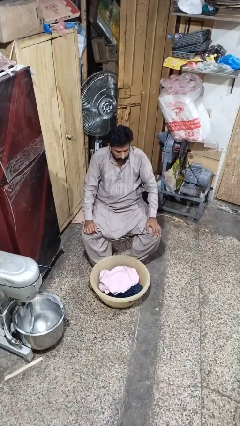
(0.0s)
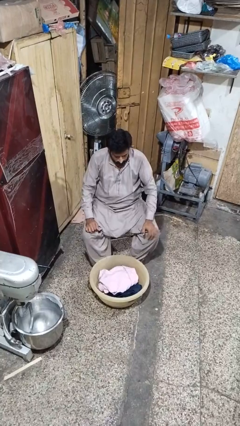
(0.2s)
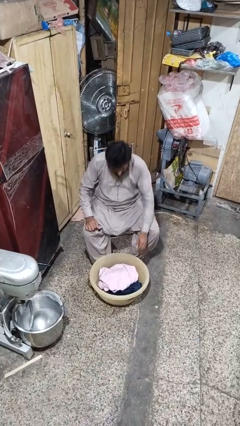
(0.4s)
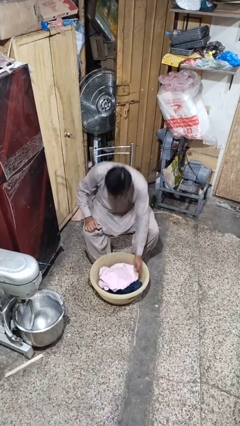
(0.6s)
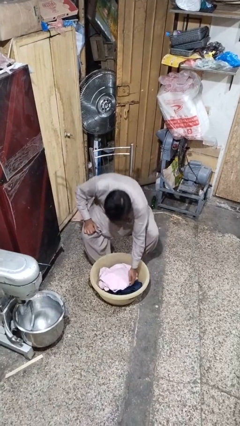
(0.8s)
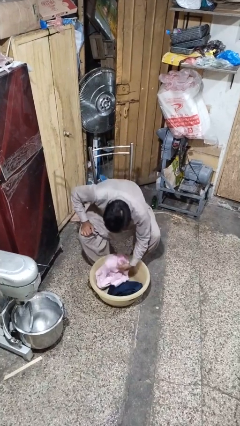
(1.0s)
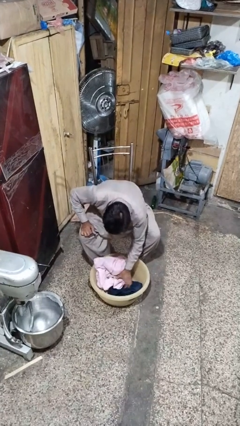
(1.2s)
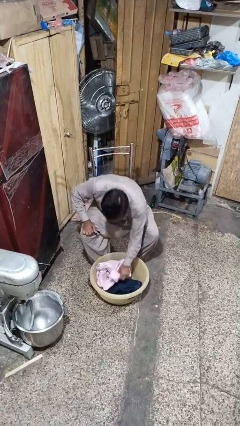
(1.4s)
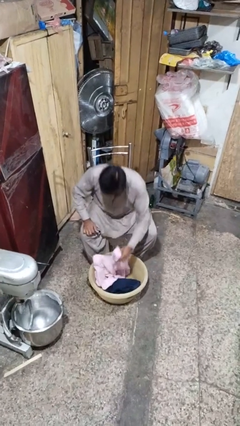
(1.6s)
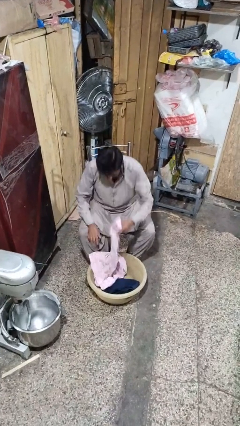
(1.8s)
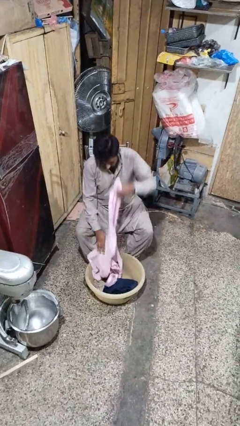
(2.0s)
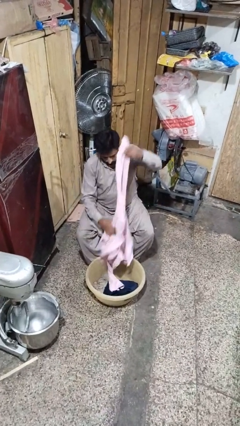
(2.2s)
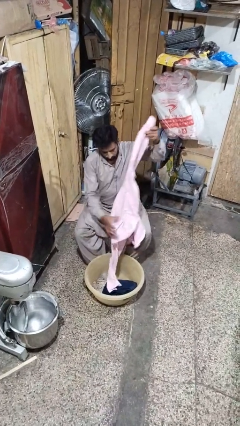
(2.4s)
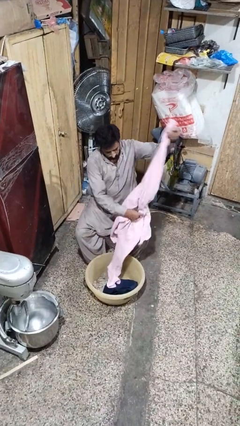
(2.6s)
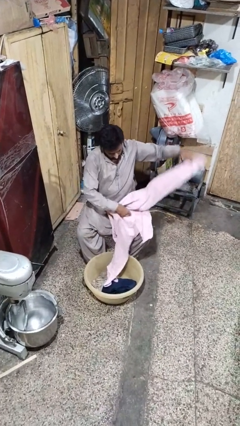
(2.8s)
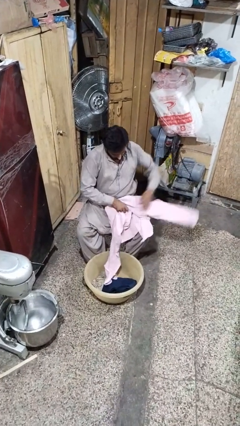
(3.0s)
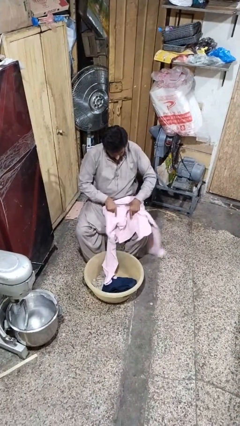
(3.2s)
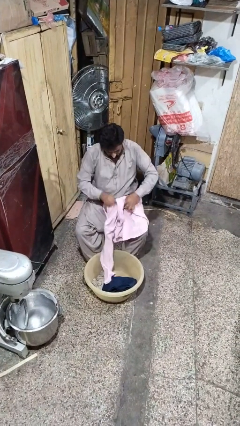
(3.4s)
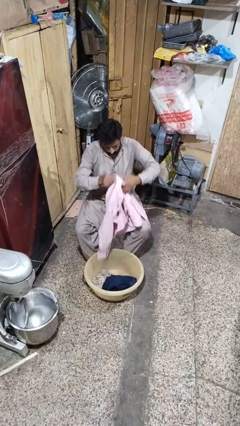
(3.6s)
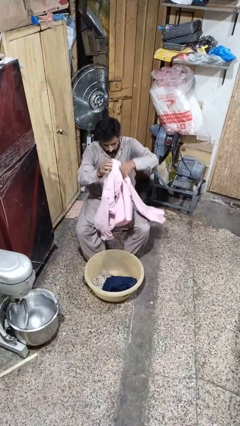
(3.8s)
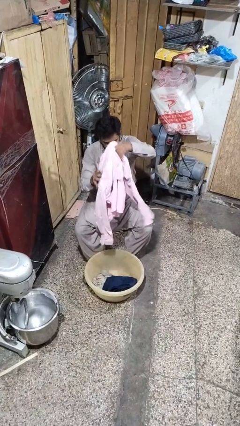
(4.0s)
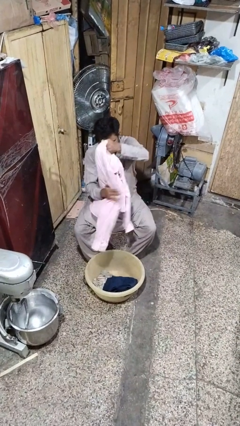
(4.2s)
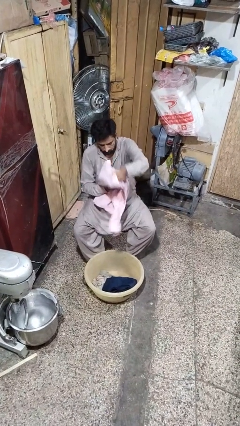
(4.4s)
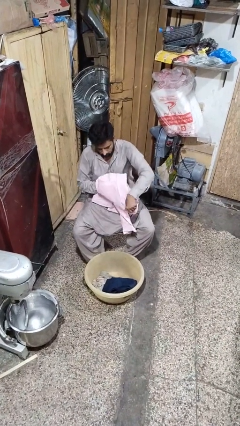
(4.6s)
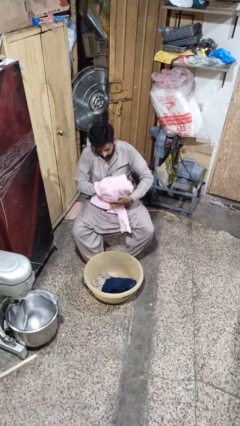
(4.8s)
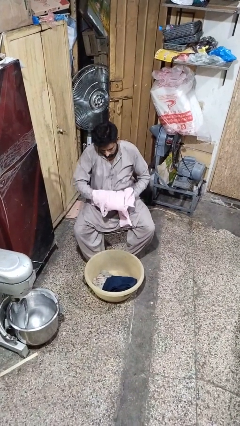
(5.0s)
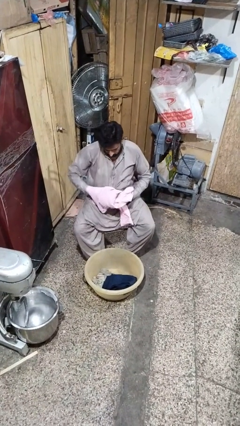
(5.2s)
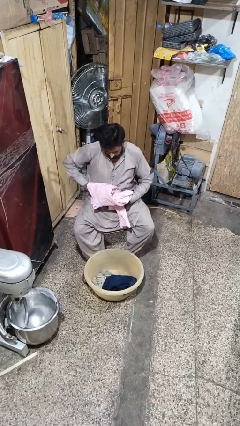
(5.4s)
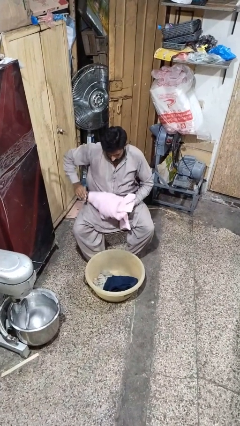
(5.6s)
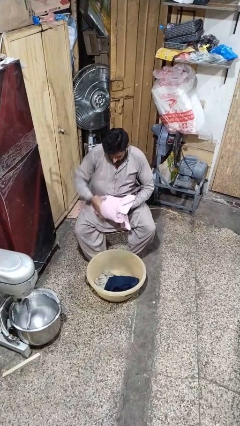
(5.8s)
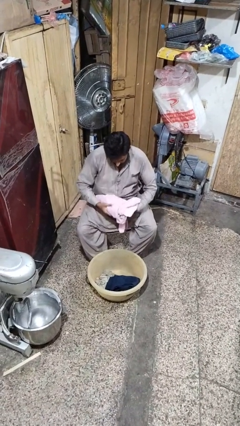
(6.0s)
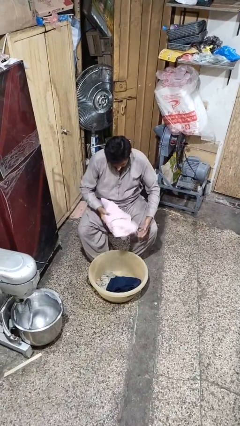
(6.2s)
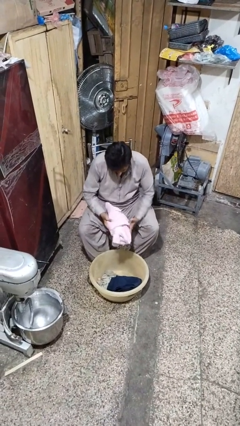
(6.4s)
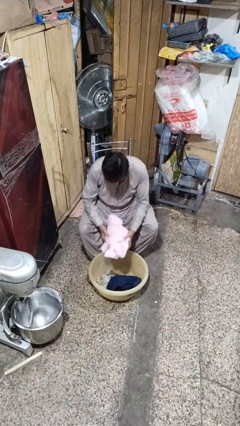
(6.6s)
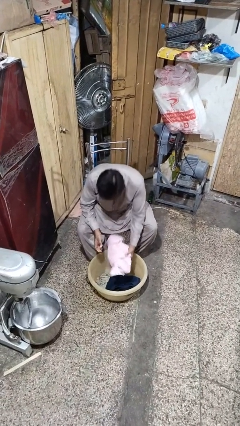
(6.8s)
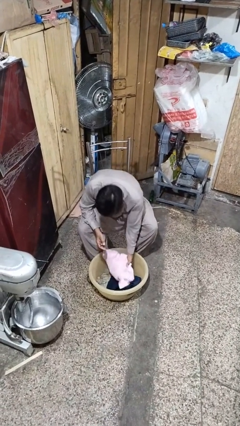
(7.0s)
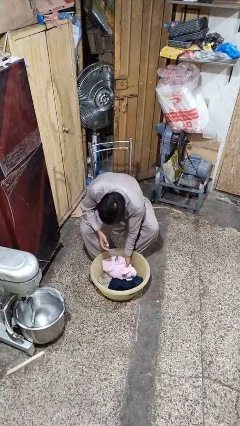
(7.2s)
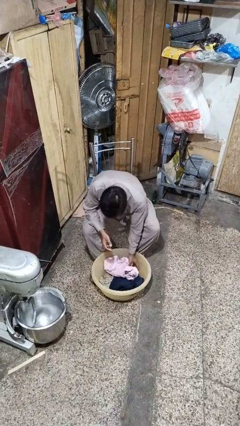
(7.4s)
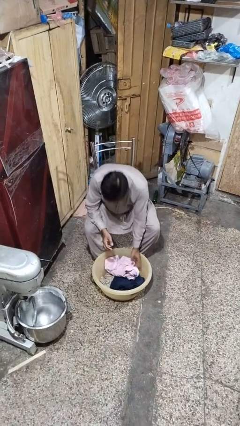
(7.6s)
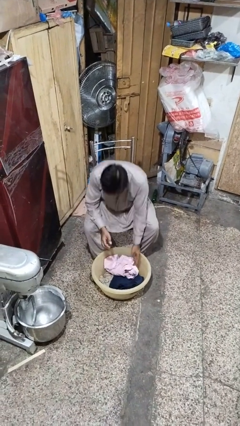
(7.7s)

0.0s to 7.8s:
person folds shirt

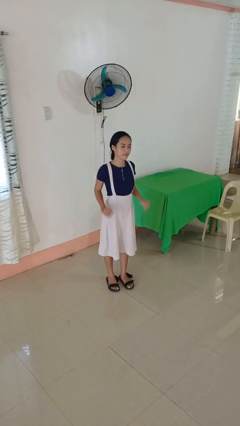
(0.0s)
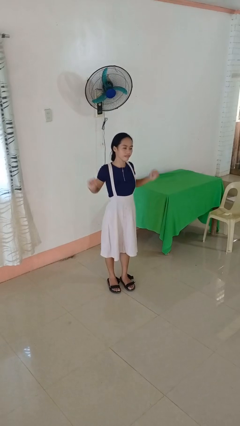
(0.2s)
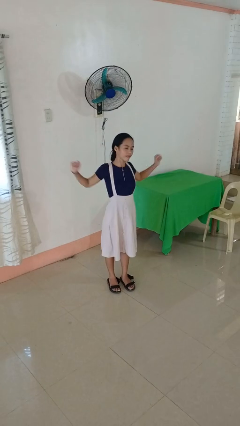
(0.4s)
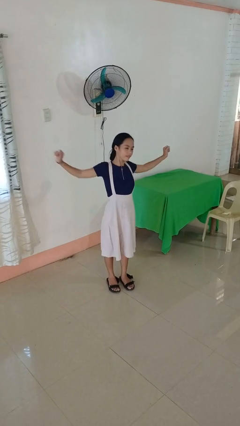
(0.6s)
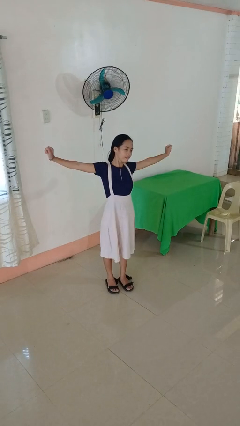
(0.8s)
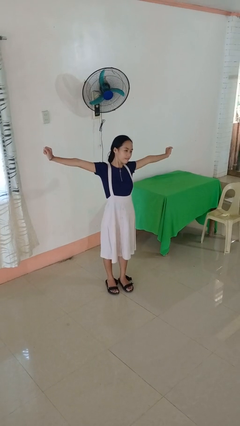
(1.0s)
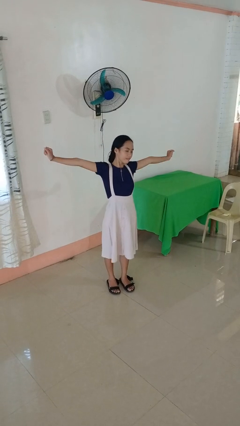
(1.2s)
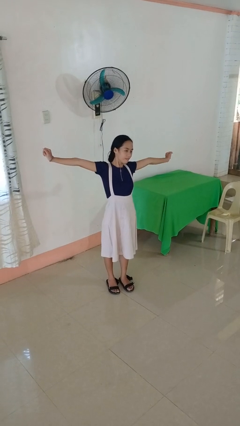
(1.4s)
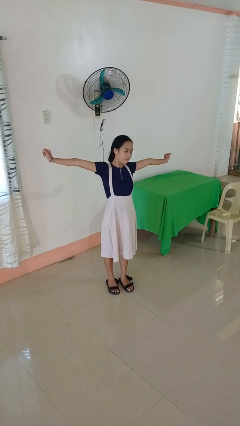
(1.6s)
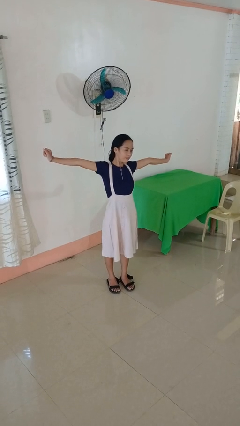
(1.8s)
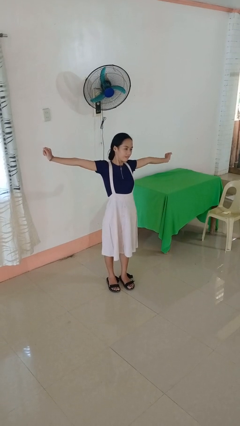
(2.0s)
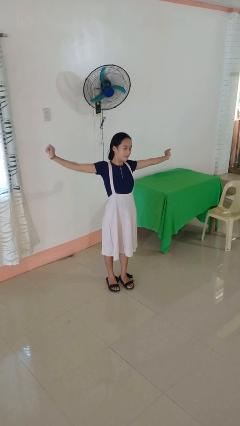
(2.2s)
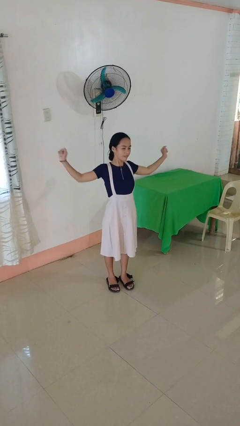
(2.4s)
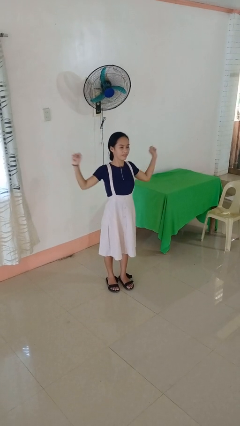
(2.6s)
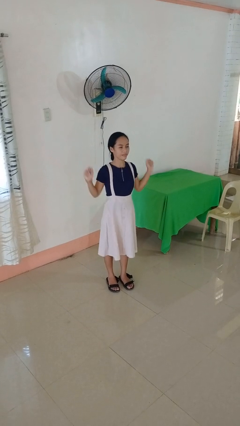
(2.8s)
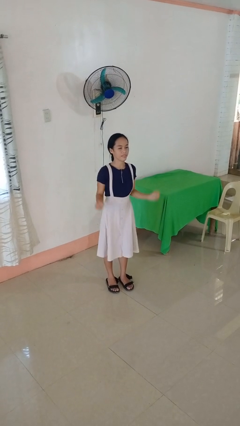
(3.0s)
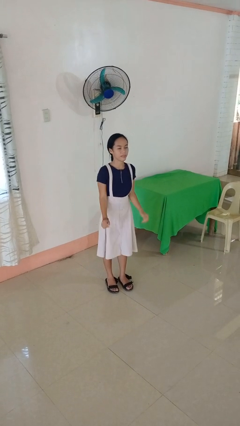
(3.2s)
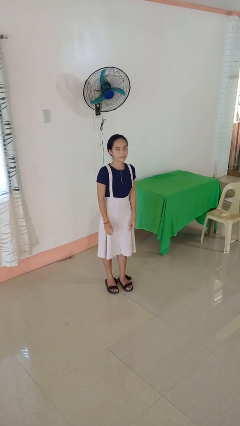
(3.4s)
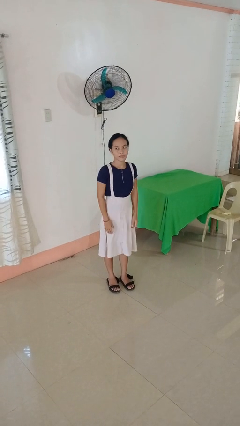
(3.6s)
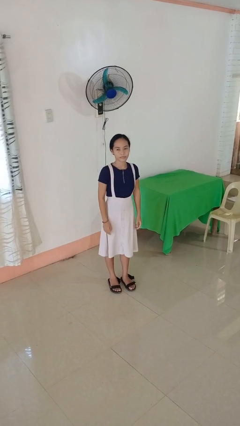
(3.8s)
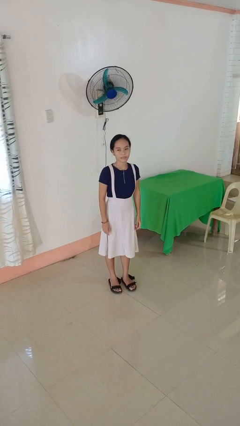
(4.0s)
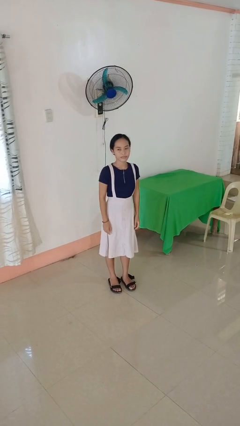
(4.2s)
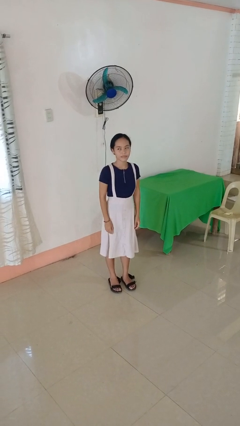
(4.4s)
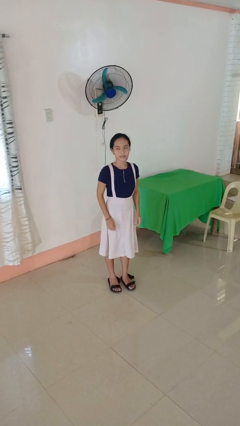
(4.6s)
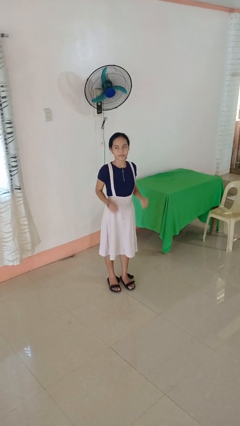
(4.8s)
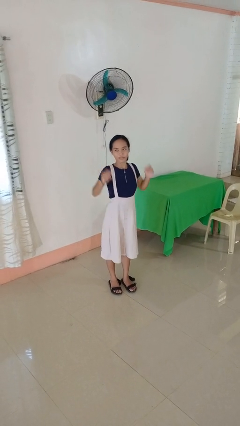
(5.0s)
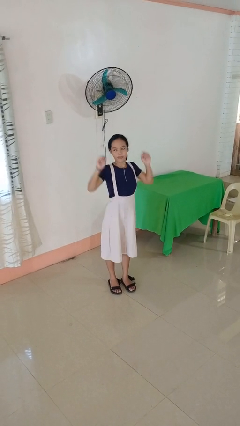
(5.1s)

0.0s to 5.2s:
person stretches arms to side

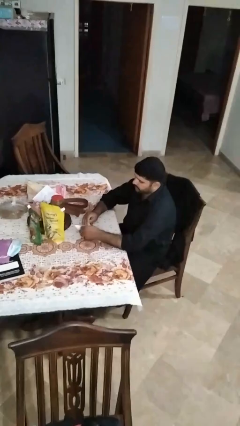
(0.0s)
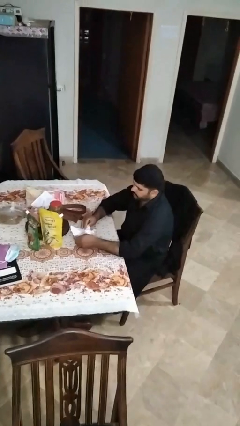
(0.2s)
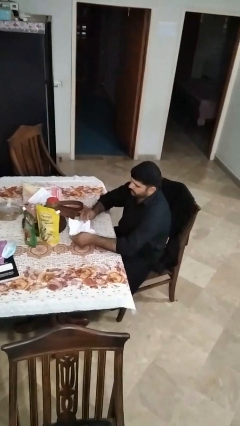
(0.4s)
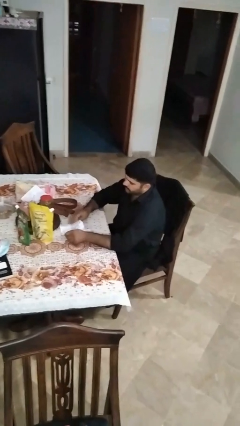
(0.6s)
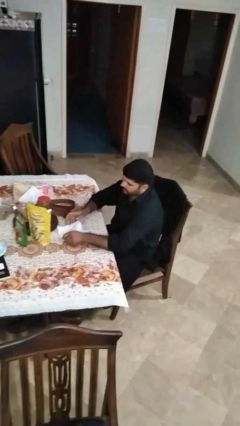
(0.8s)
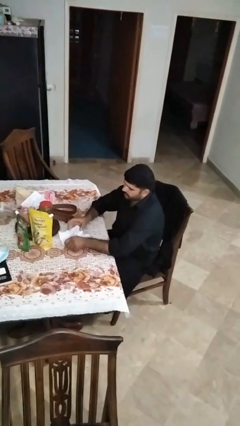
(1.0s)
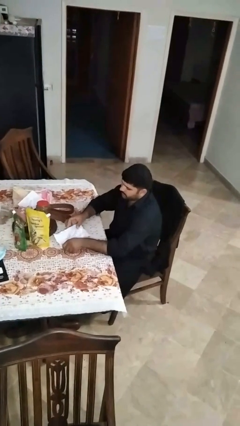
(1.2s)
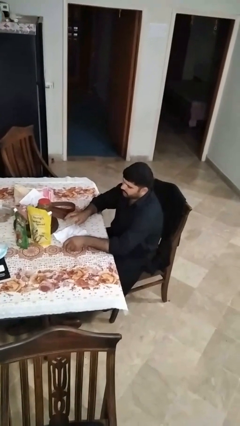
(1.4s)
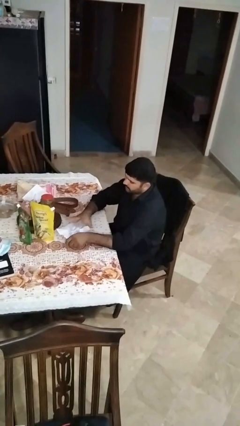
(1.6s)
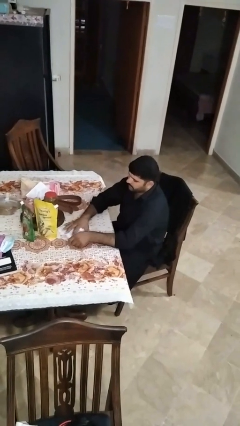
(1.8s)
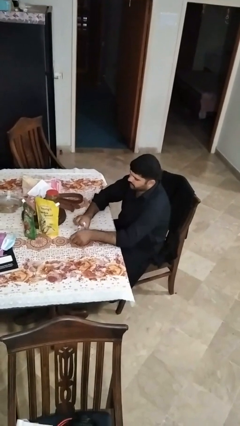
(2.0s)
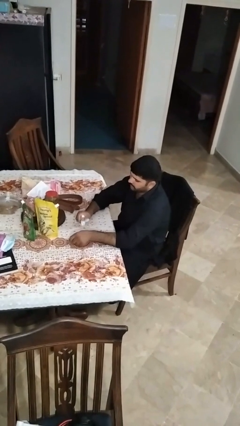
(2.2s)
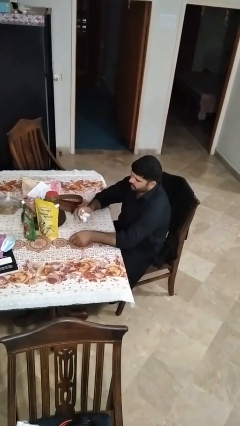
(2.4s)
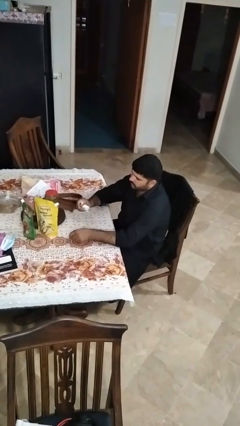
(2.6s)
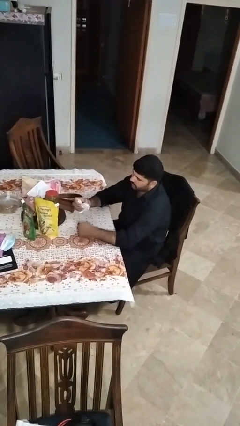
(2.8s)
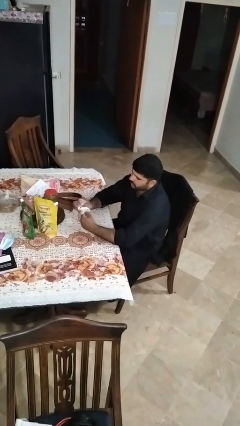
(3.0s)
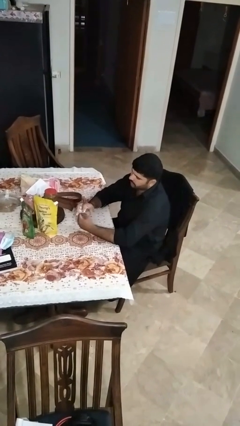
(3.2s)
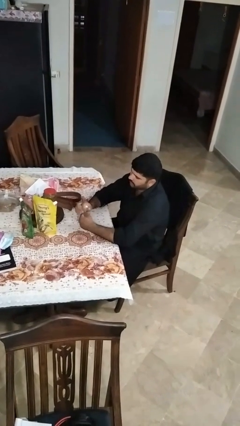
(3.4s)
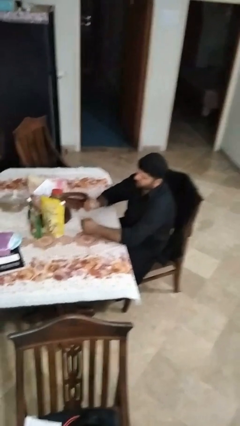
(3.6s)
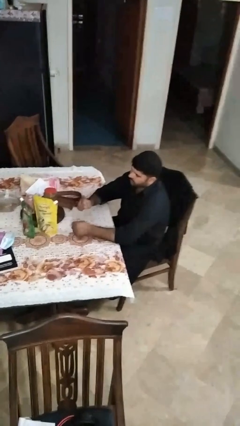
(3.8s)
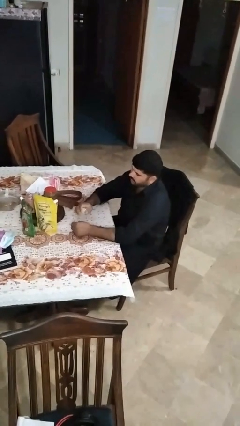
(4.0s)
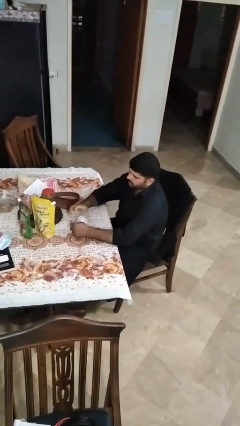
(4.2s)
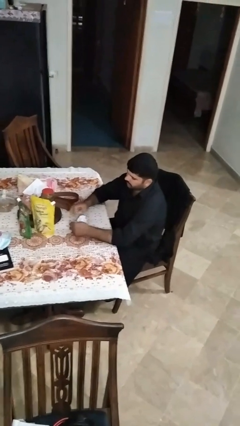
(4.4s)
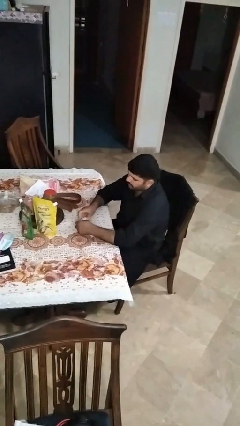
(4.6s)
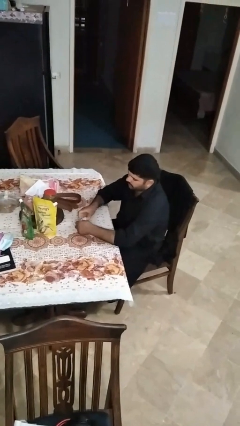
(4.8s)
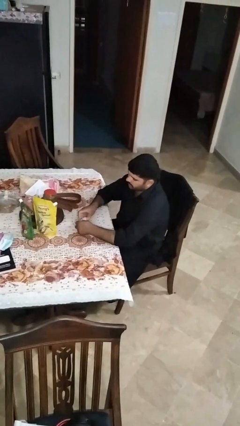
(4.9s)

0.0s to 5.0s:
person crumples paper
